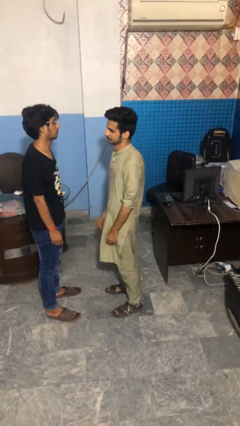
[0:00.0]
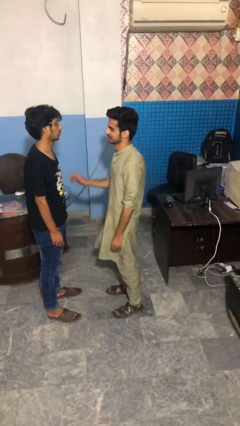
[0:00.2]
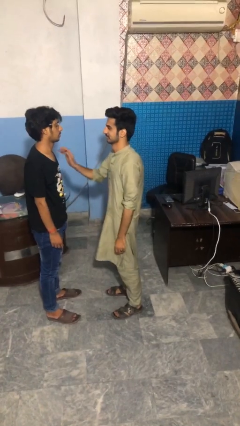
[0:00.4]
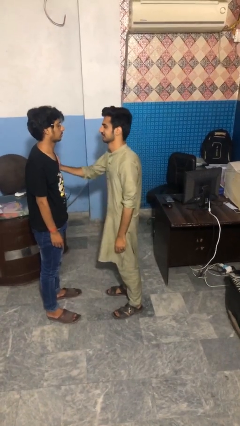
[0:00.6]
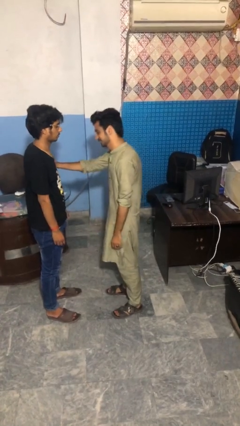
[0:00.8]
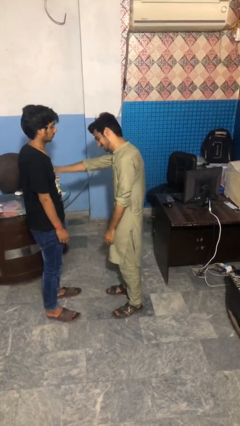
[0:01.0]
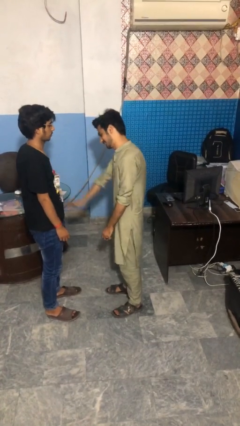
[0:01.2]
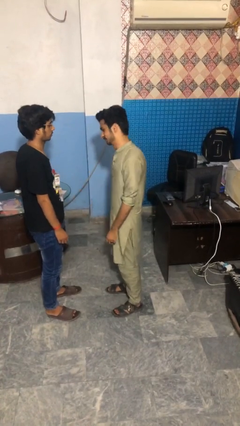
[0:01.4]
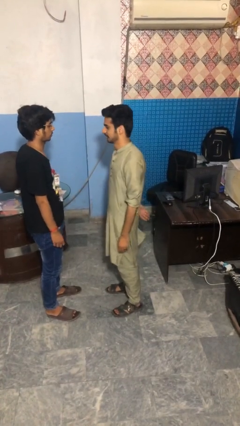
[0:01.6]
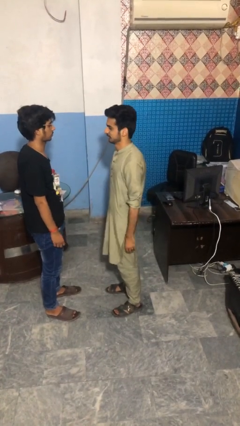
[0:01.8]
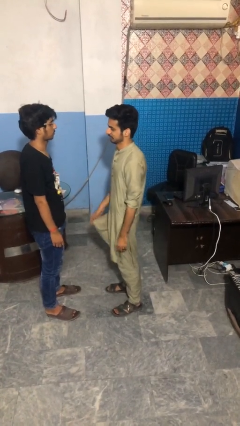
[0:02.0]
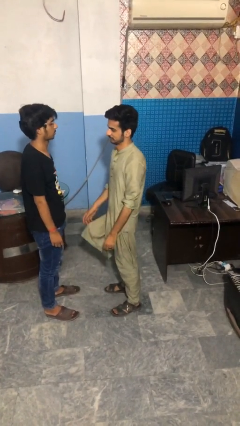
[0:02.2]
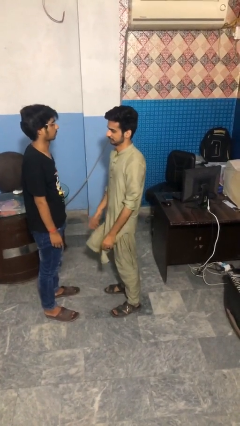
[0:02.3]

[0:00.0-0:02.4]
person shoves person

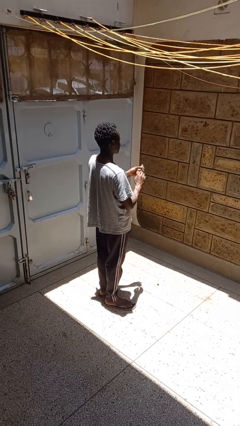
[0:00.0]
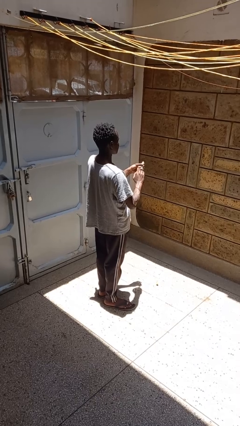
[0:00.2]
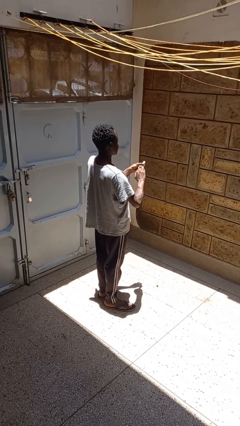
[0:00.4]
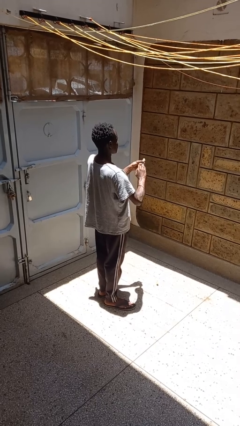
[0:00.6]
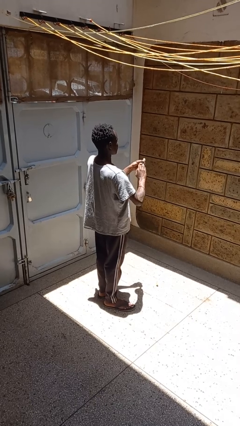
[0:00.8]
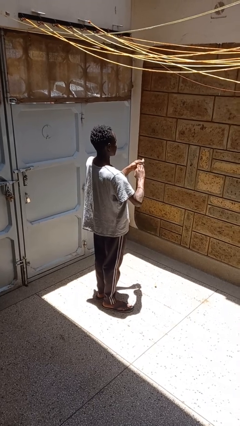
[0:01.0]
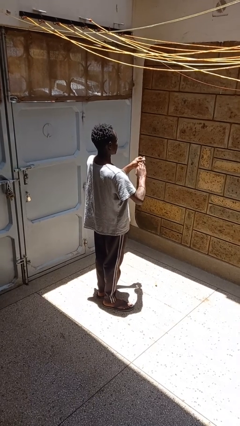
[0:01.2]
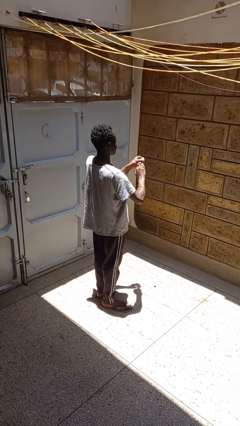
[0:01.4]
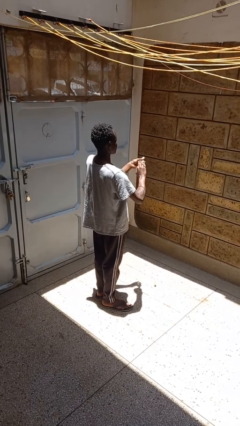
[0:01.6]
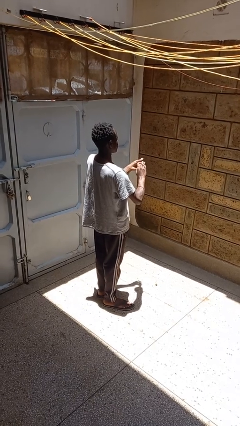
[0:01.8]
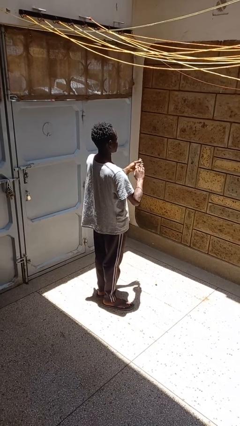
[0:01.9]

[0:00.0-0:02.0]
person clips fingernails

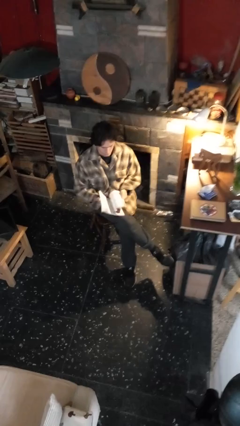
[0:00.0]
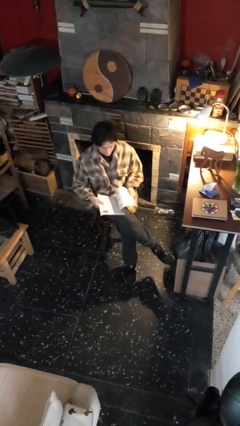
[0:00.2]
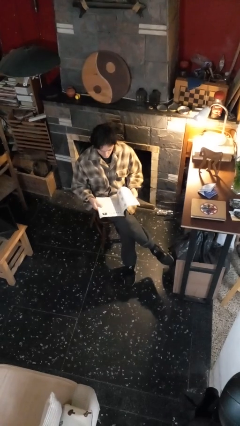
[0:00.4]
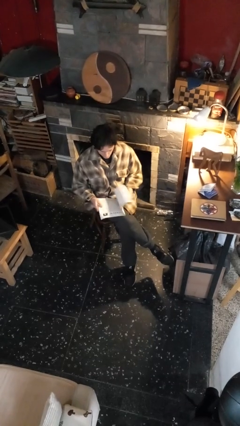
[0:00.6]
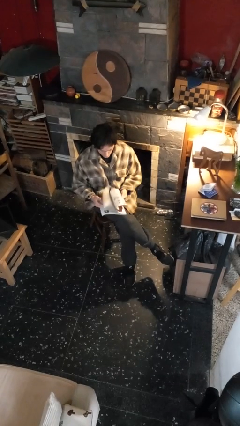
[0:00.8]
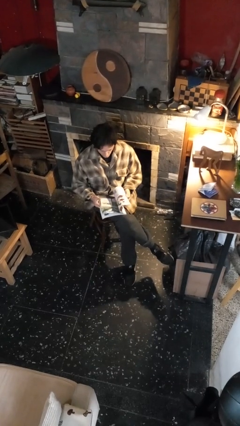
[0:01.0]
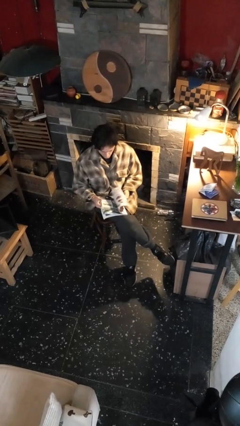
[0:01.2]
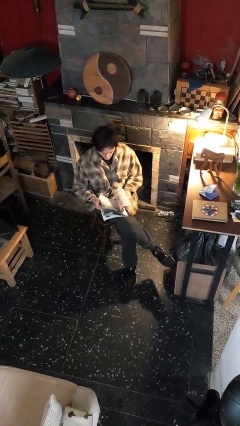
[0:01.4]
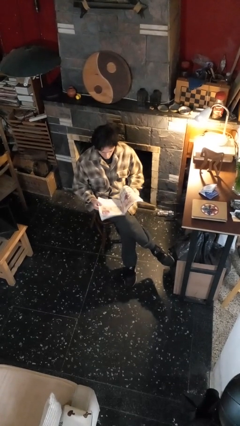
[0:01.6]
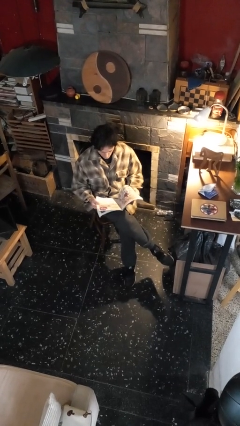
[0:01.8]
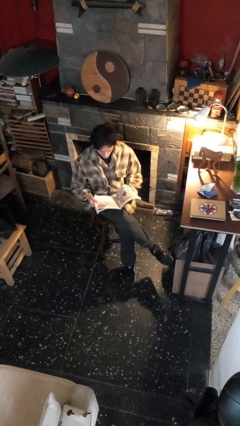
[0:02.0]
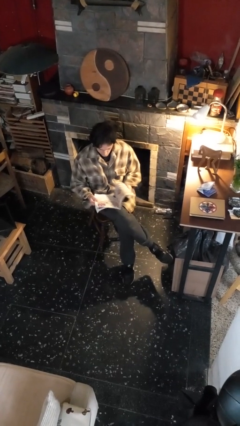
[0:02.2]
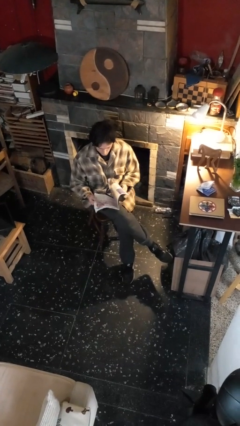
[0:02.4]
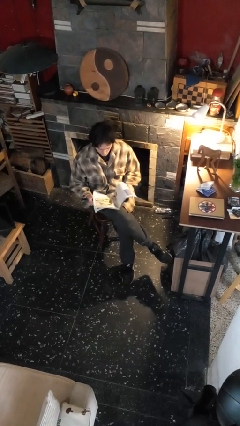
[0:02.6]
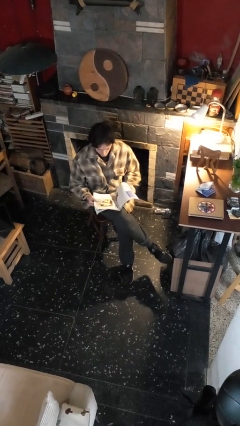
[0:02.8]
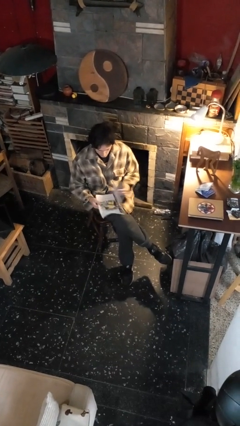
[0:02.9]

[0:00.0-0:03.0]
person reads magazine

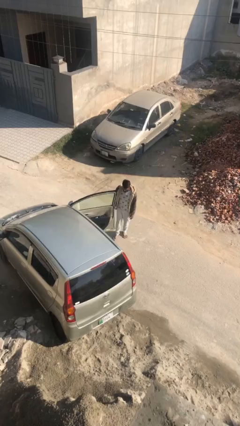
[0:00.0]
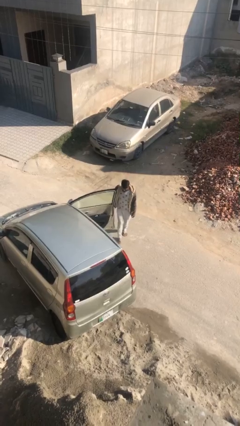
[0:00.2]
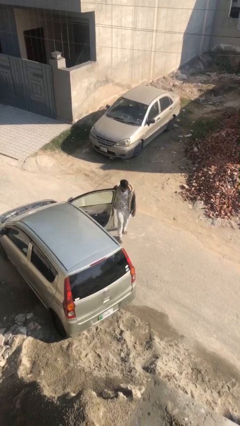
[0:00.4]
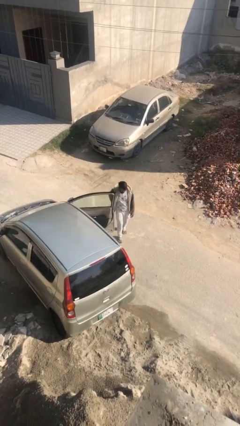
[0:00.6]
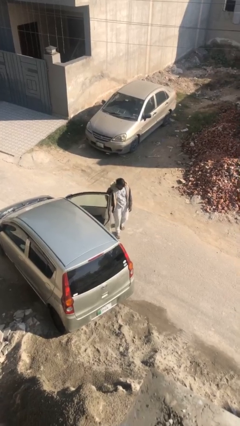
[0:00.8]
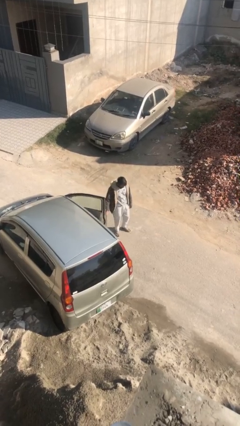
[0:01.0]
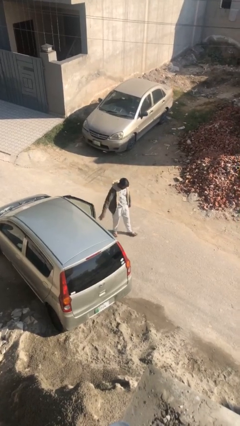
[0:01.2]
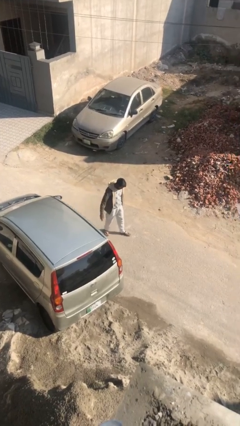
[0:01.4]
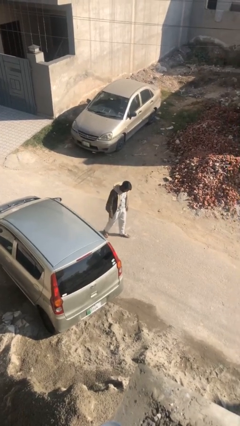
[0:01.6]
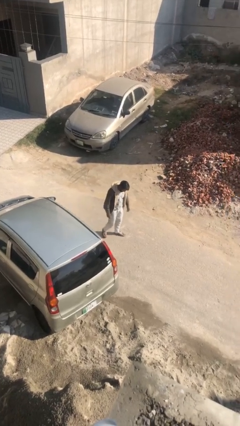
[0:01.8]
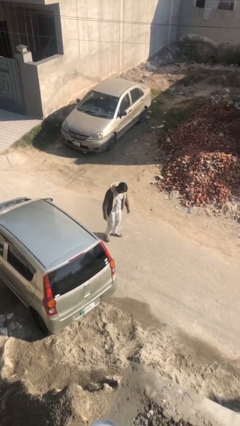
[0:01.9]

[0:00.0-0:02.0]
person closes car door

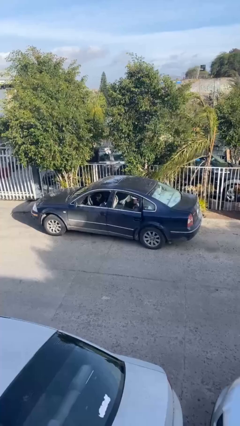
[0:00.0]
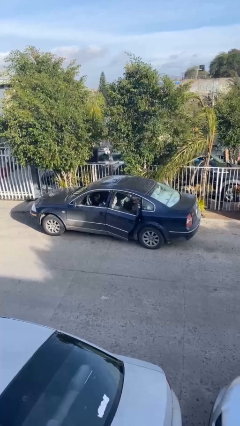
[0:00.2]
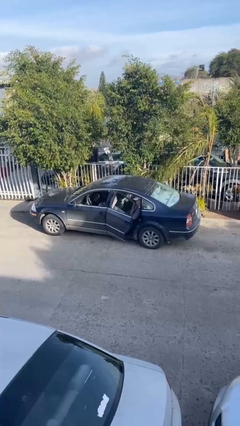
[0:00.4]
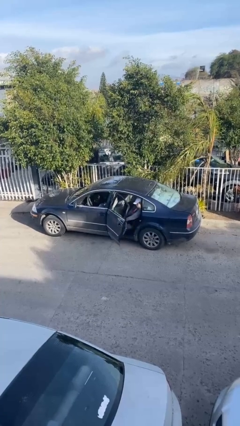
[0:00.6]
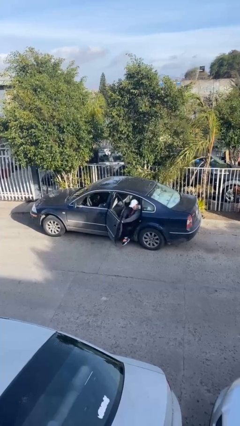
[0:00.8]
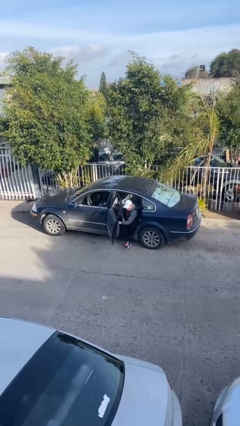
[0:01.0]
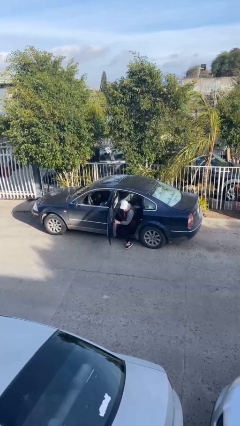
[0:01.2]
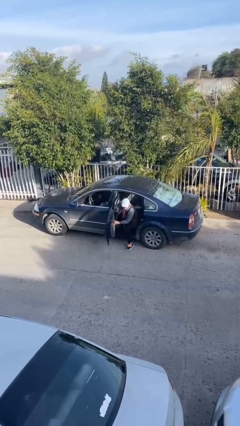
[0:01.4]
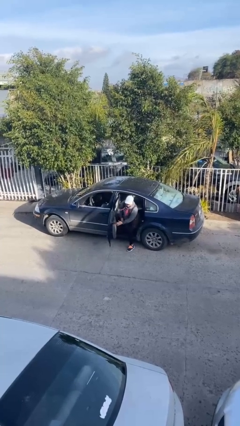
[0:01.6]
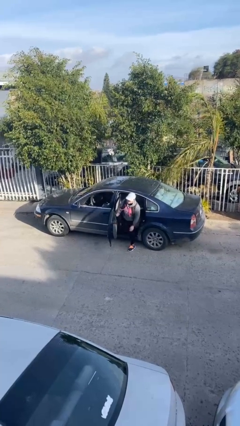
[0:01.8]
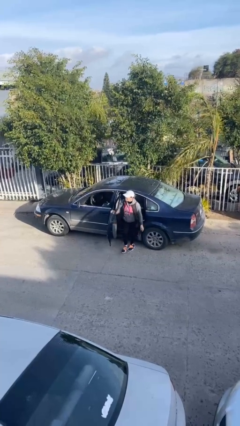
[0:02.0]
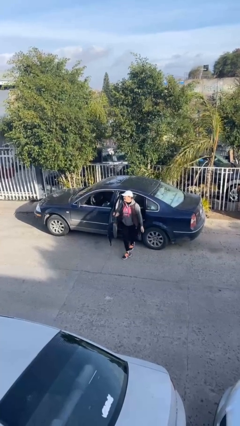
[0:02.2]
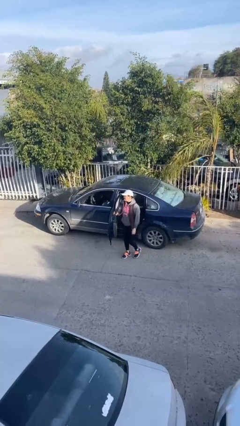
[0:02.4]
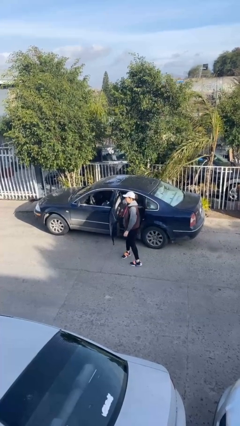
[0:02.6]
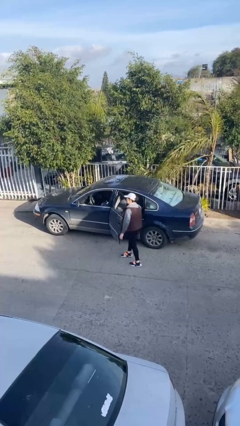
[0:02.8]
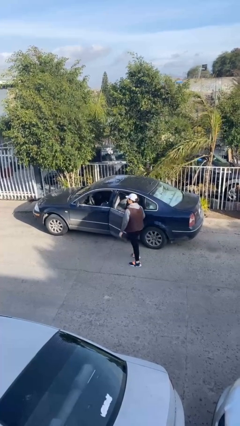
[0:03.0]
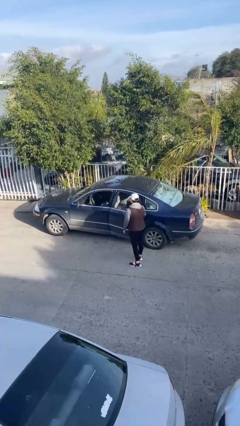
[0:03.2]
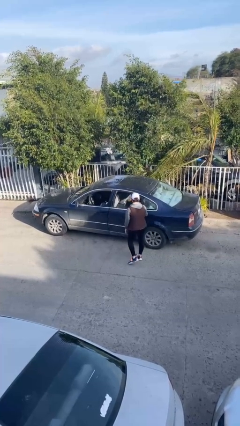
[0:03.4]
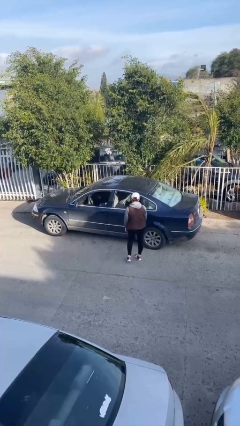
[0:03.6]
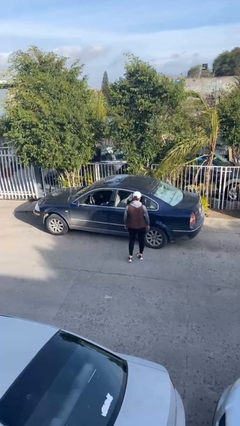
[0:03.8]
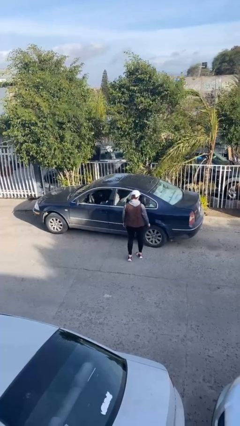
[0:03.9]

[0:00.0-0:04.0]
car drops off person

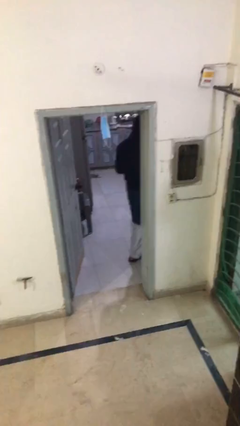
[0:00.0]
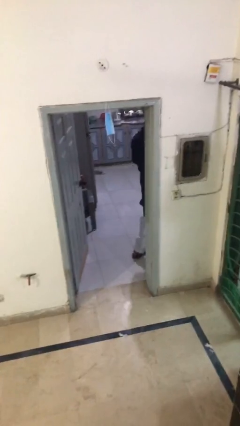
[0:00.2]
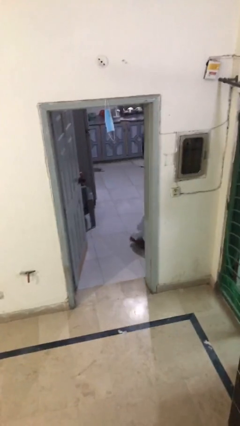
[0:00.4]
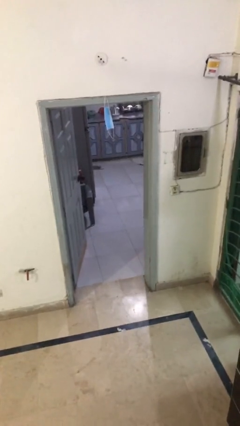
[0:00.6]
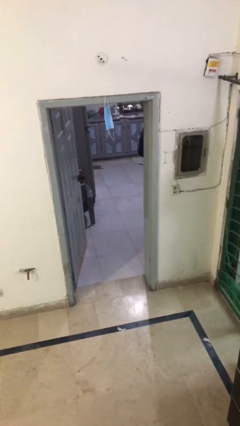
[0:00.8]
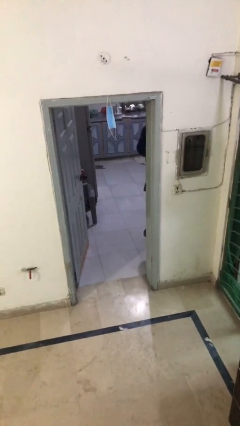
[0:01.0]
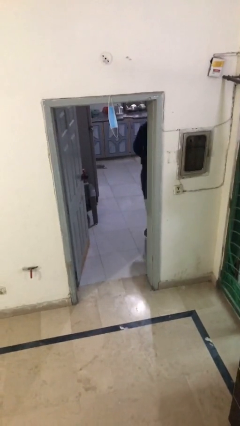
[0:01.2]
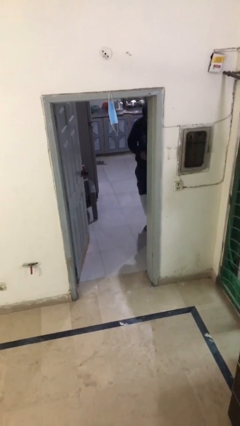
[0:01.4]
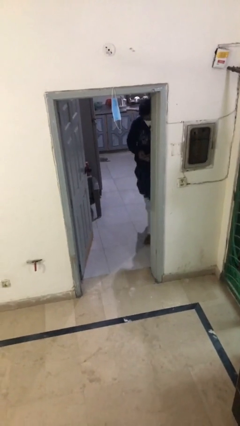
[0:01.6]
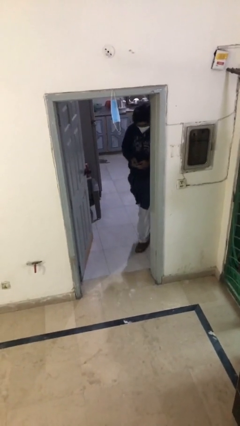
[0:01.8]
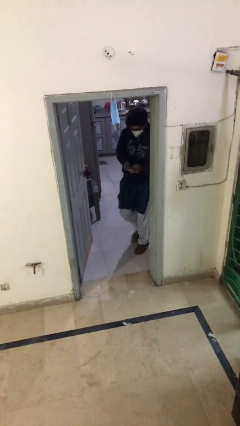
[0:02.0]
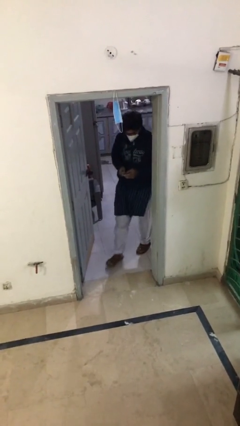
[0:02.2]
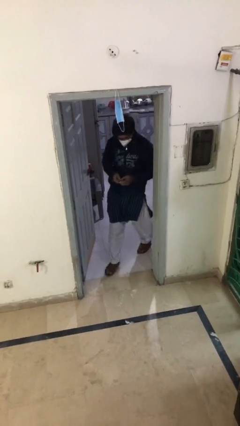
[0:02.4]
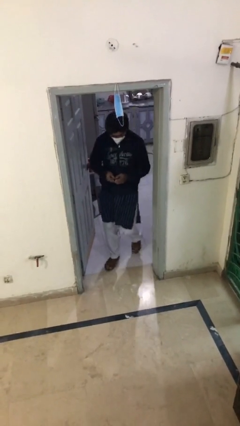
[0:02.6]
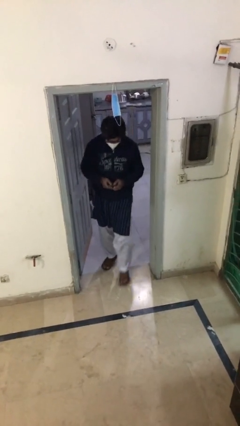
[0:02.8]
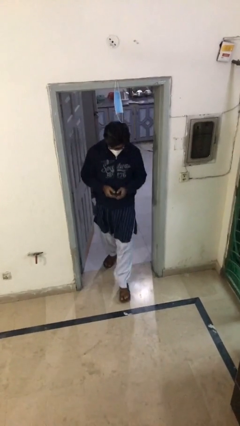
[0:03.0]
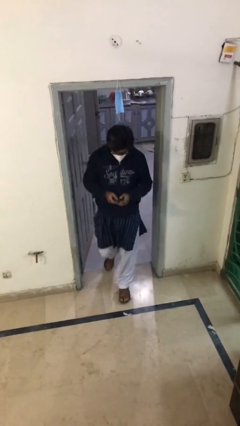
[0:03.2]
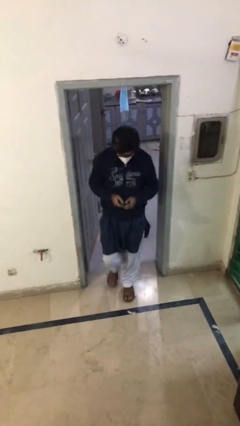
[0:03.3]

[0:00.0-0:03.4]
person enters scene through structure

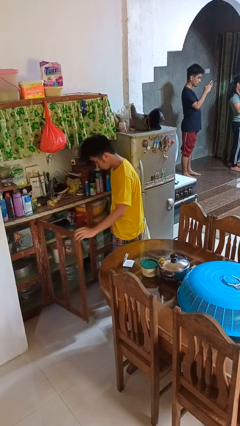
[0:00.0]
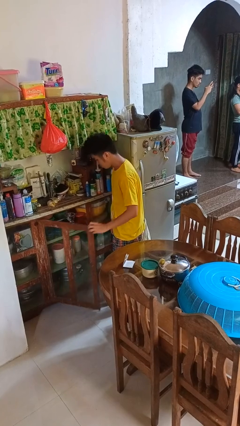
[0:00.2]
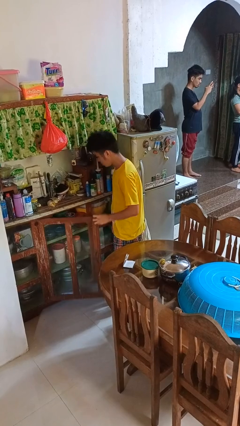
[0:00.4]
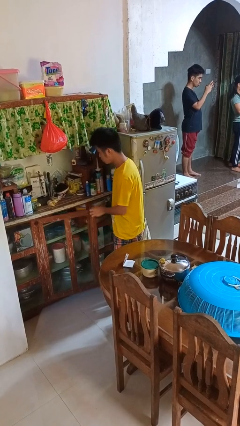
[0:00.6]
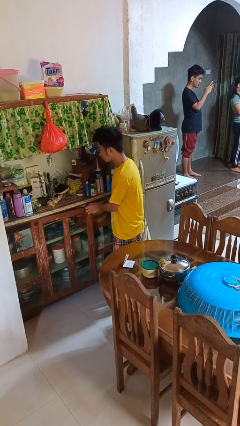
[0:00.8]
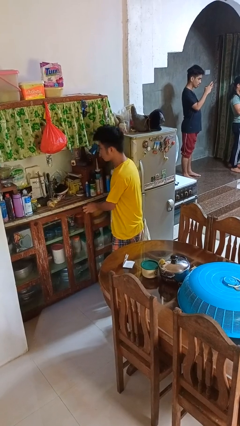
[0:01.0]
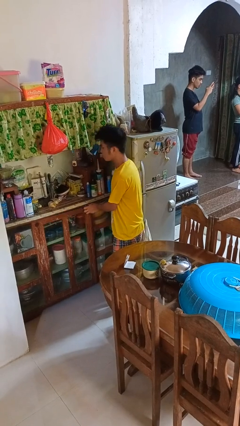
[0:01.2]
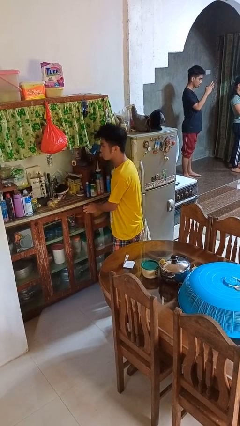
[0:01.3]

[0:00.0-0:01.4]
person closes cabinet
